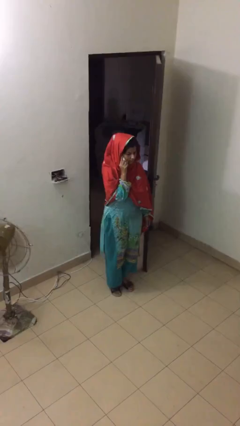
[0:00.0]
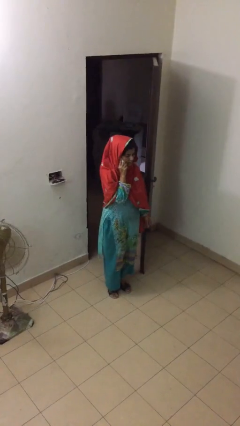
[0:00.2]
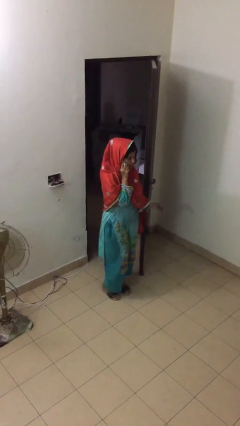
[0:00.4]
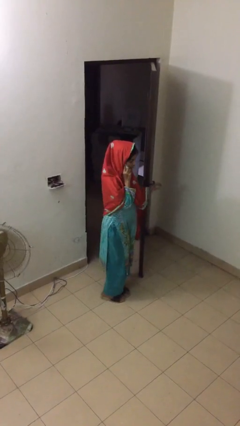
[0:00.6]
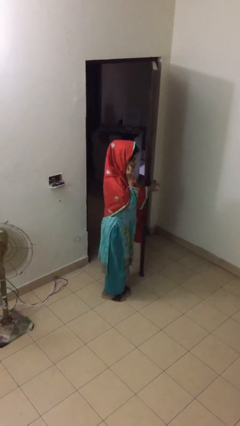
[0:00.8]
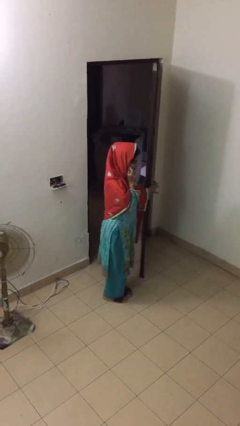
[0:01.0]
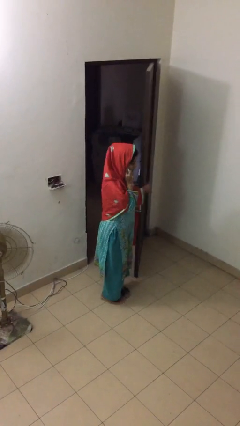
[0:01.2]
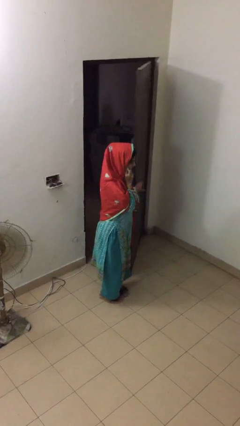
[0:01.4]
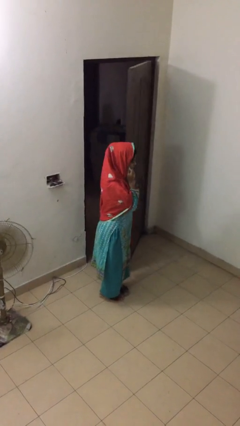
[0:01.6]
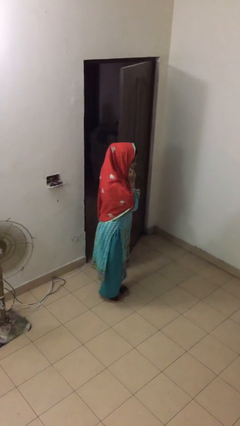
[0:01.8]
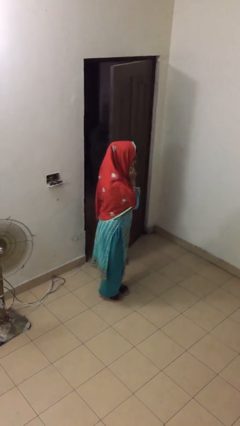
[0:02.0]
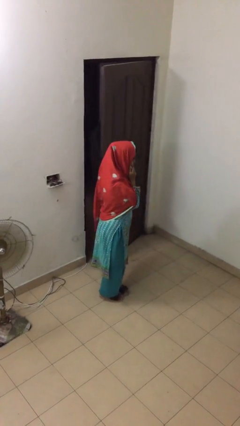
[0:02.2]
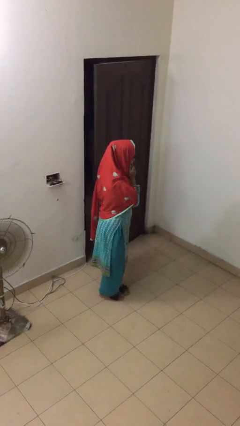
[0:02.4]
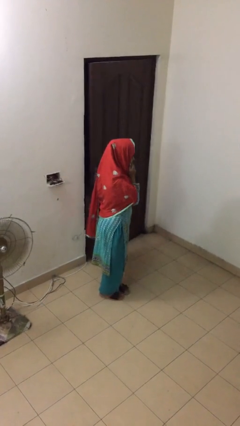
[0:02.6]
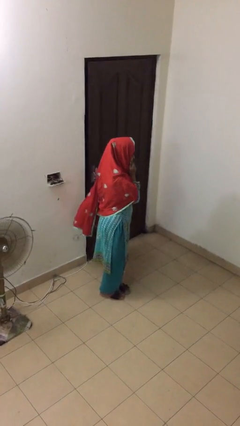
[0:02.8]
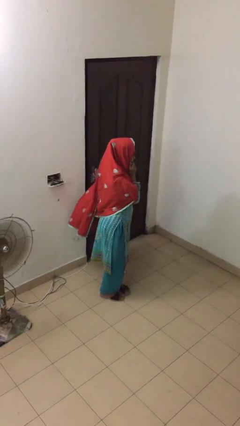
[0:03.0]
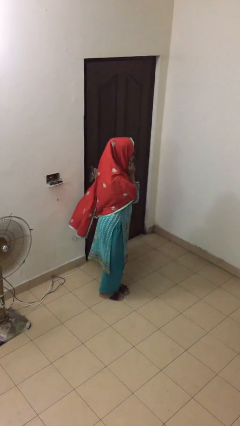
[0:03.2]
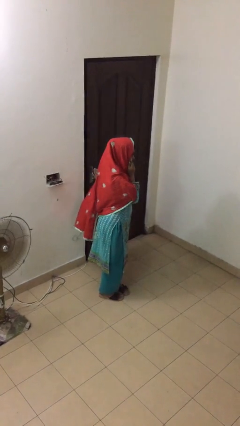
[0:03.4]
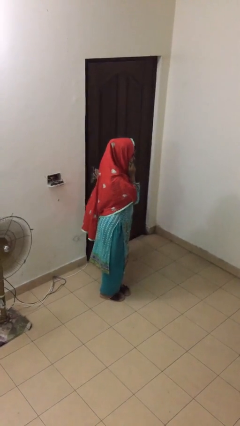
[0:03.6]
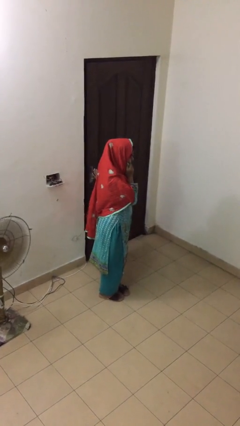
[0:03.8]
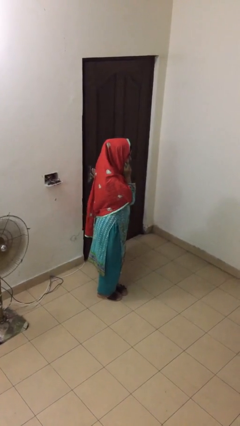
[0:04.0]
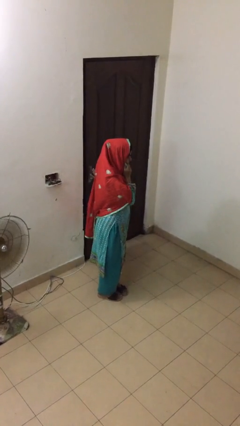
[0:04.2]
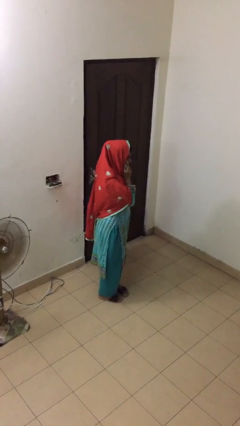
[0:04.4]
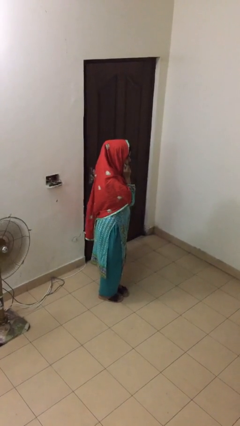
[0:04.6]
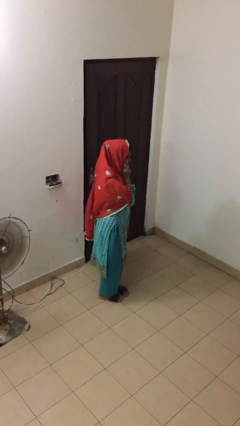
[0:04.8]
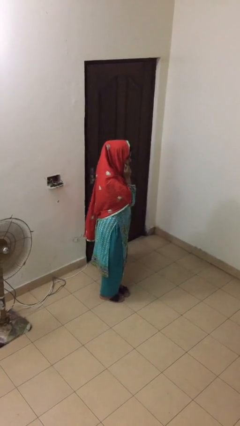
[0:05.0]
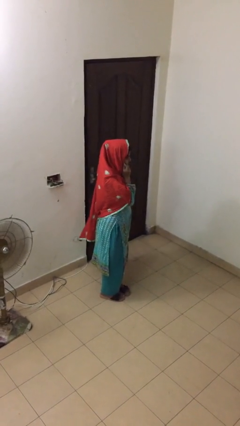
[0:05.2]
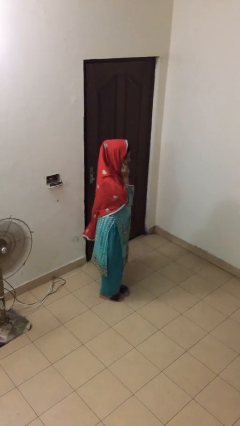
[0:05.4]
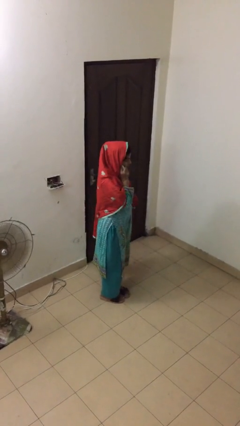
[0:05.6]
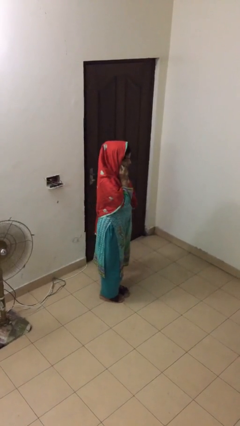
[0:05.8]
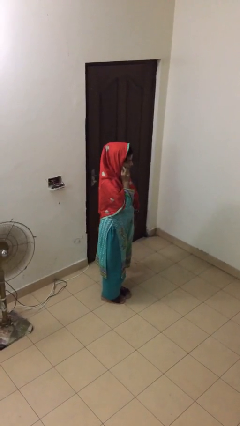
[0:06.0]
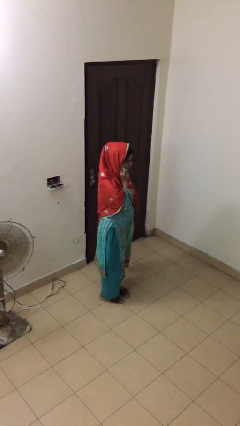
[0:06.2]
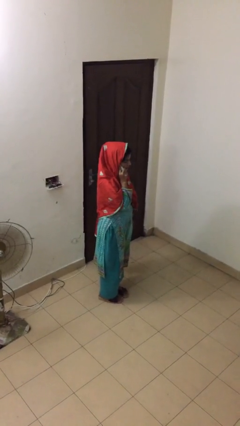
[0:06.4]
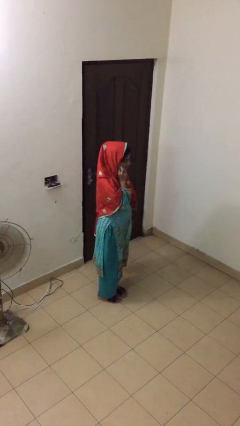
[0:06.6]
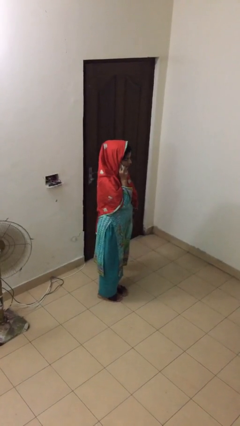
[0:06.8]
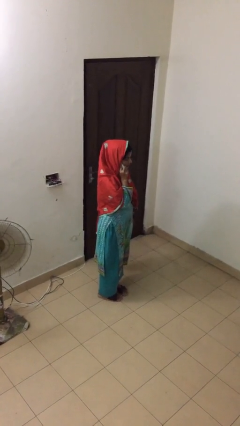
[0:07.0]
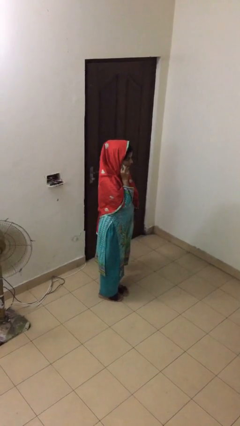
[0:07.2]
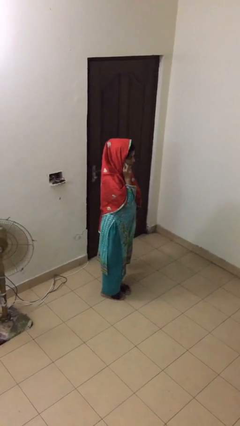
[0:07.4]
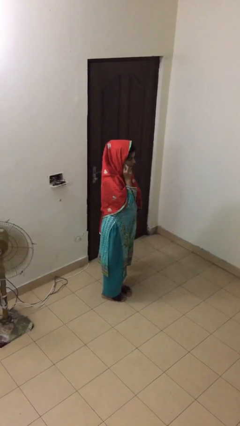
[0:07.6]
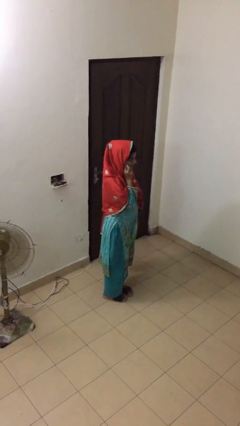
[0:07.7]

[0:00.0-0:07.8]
person closes facility door

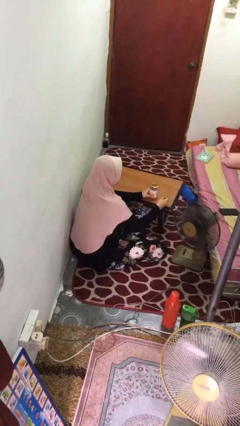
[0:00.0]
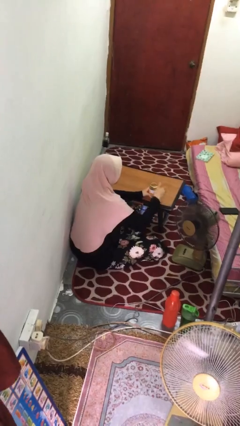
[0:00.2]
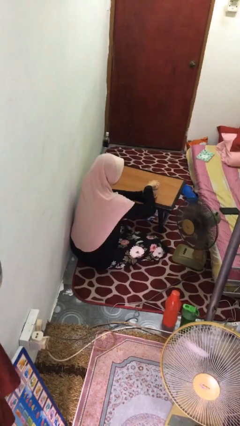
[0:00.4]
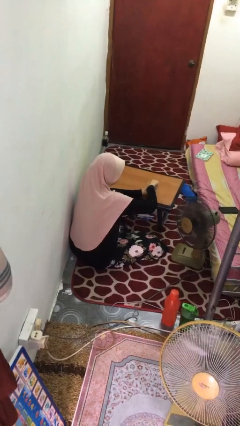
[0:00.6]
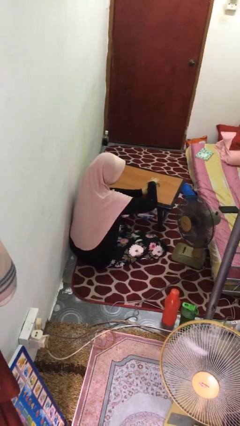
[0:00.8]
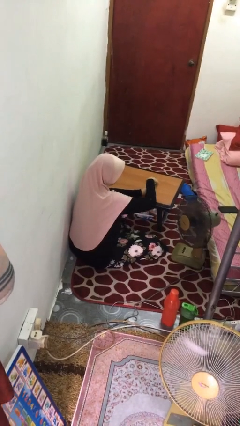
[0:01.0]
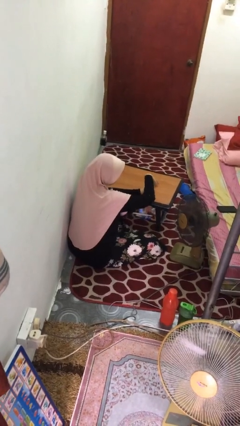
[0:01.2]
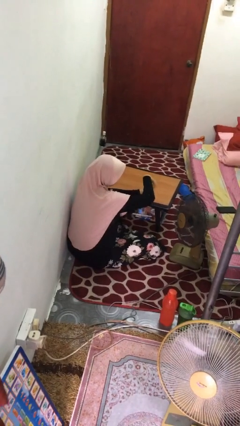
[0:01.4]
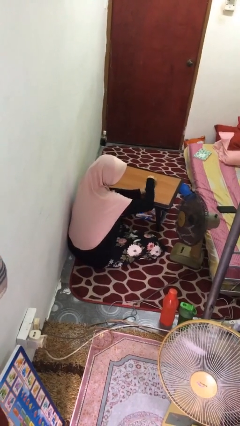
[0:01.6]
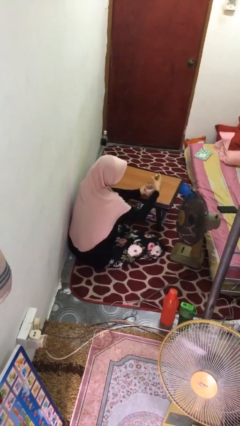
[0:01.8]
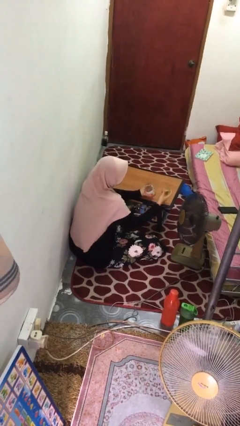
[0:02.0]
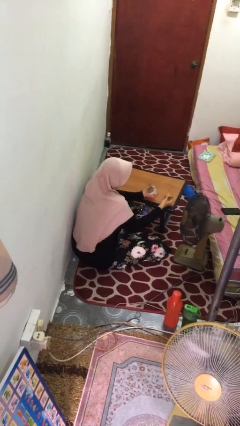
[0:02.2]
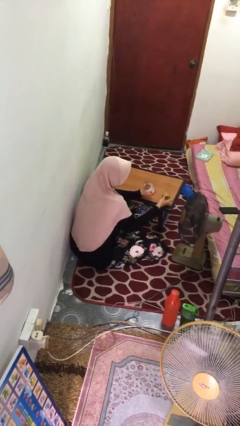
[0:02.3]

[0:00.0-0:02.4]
person opens jar

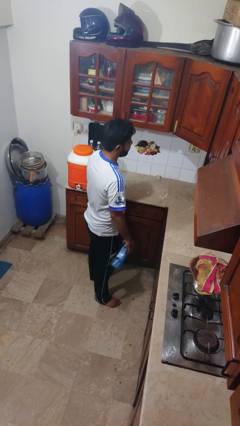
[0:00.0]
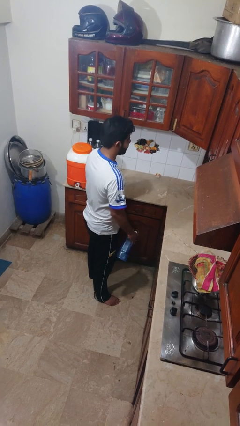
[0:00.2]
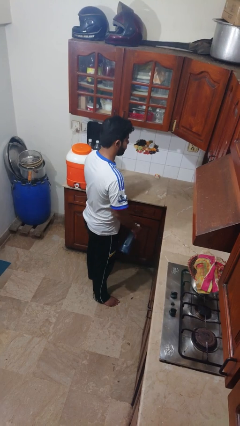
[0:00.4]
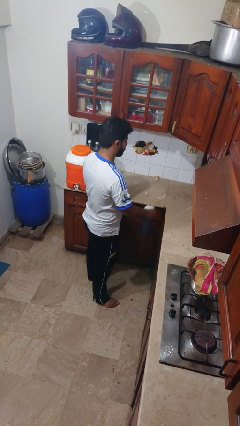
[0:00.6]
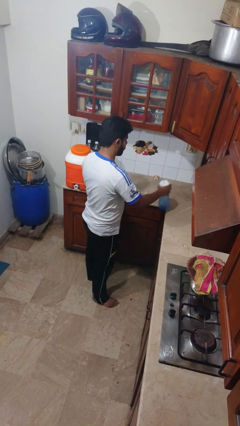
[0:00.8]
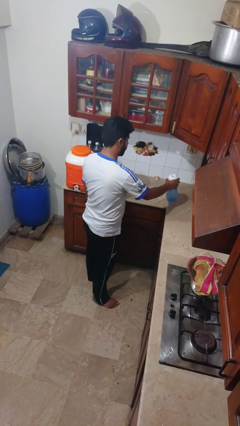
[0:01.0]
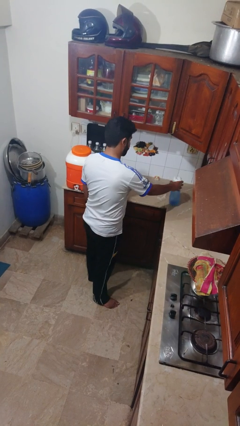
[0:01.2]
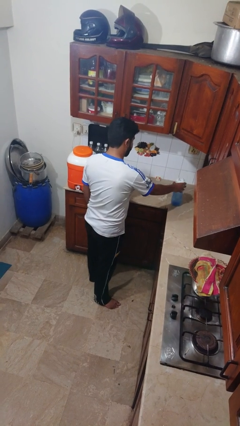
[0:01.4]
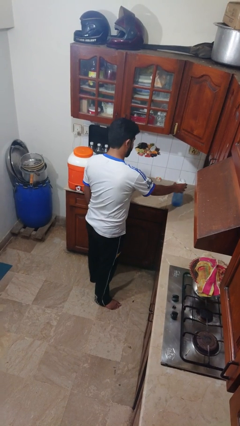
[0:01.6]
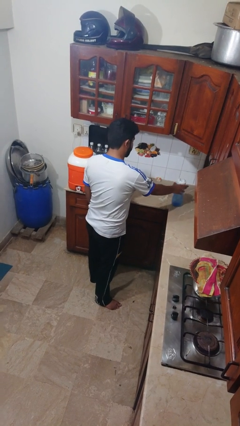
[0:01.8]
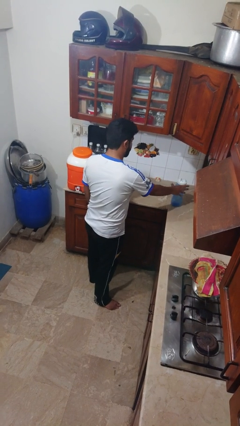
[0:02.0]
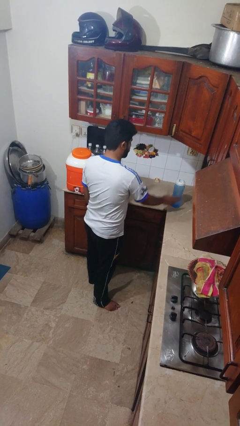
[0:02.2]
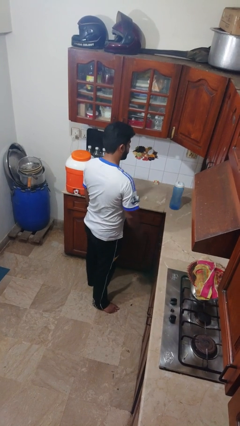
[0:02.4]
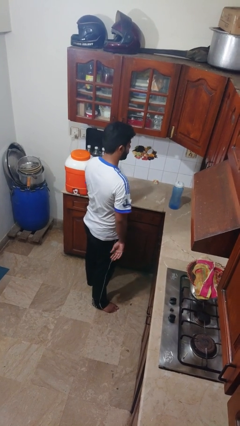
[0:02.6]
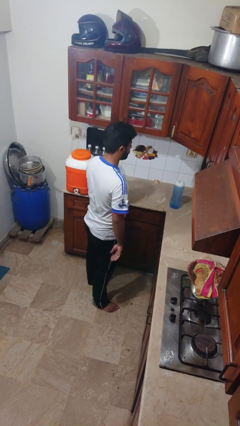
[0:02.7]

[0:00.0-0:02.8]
person puts down object on countertop

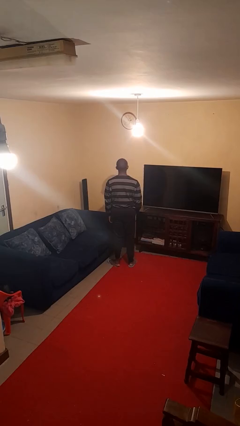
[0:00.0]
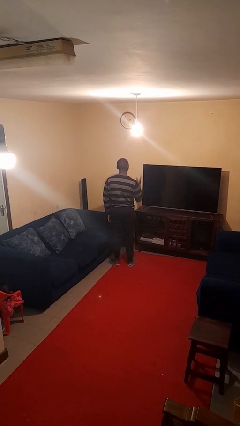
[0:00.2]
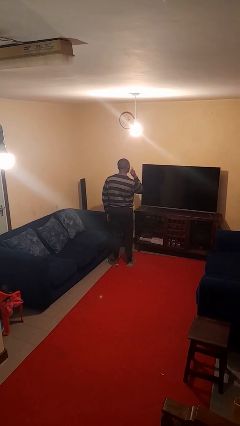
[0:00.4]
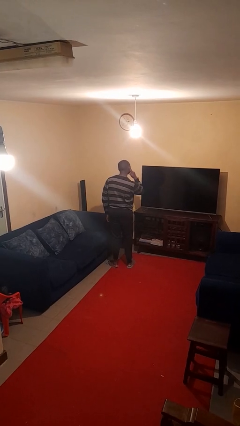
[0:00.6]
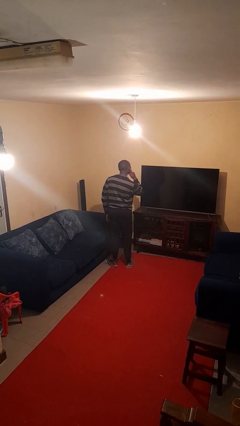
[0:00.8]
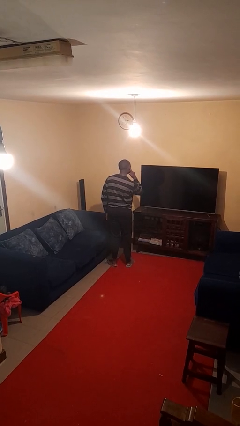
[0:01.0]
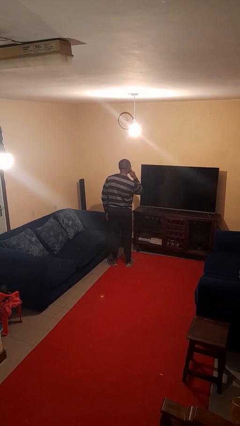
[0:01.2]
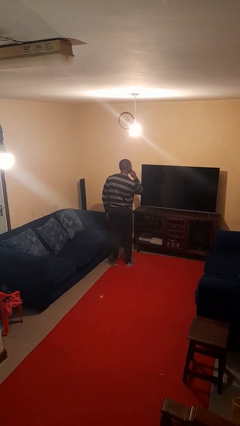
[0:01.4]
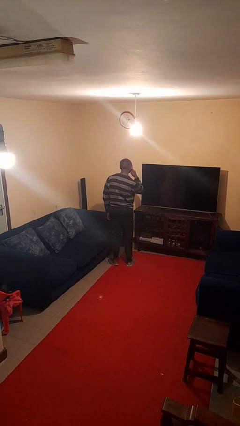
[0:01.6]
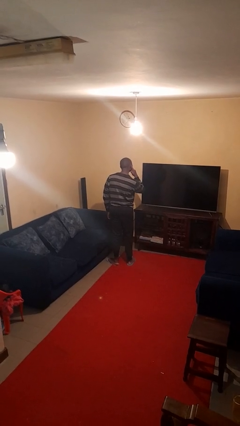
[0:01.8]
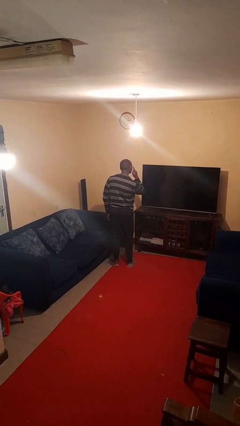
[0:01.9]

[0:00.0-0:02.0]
person gestures listen closely

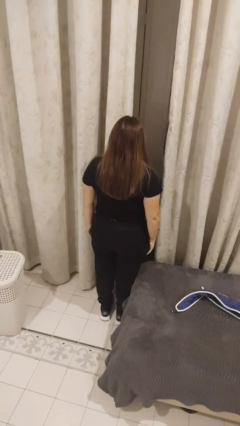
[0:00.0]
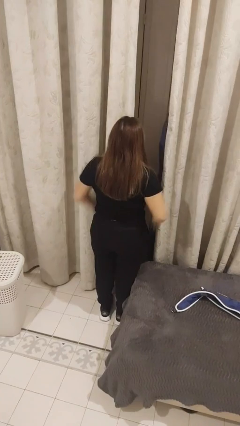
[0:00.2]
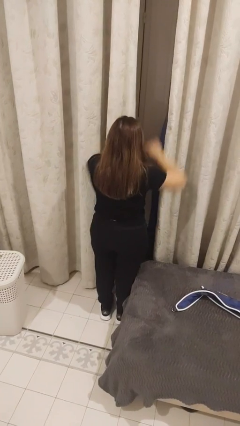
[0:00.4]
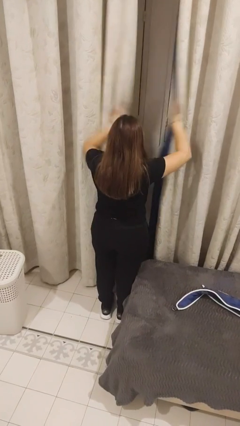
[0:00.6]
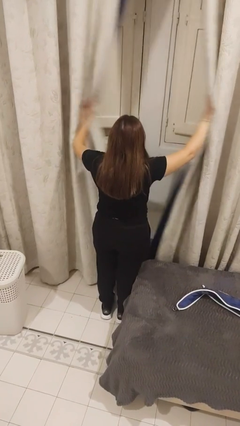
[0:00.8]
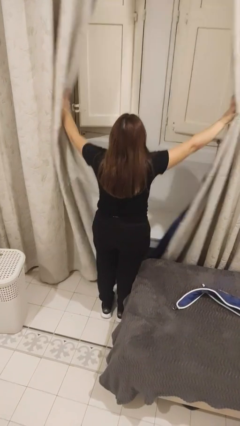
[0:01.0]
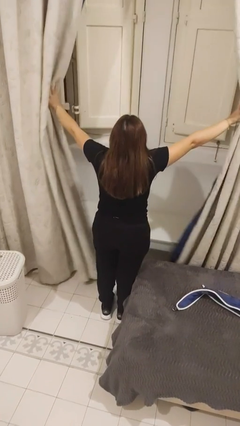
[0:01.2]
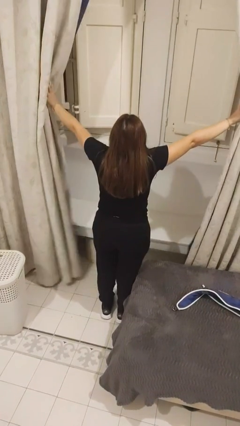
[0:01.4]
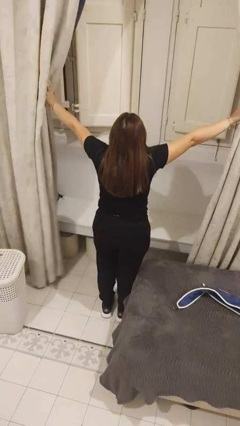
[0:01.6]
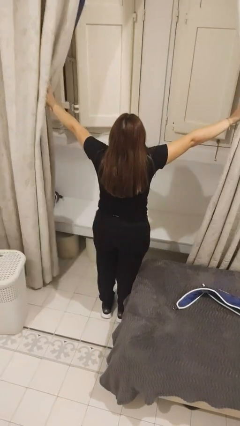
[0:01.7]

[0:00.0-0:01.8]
person opens curtains

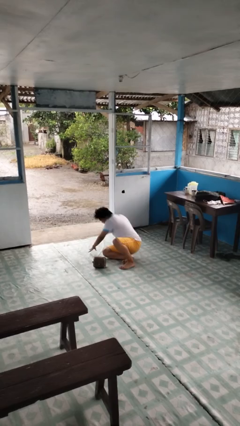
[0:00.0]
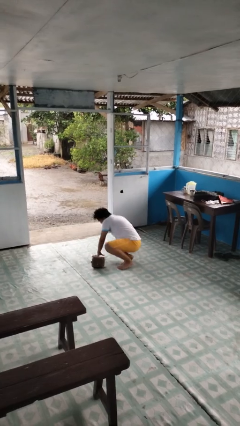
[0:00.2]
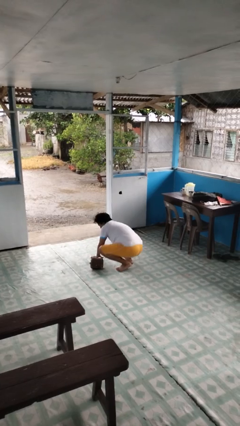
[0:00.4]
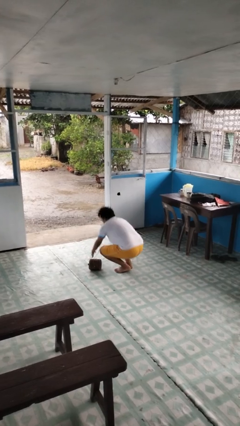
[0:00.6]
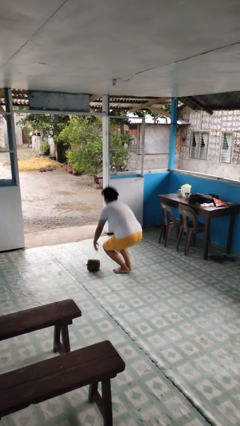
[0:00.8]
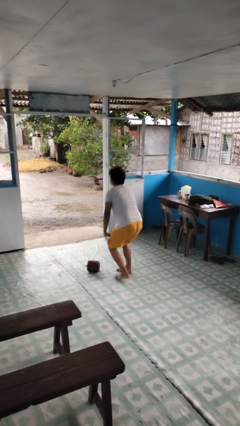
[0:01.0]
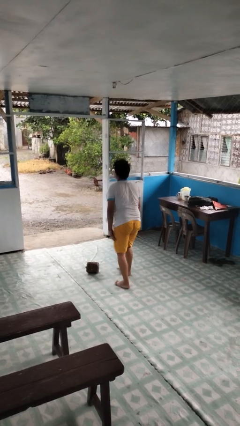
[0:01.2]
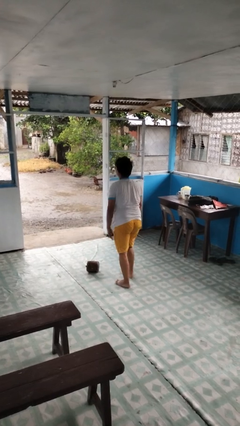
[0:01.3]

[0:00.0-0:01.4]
person stands up from floor
